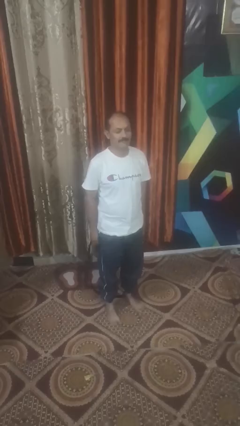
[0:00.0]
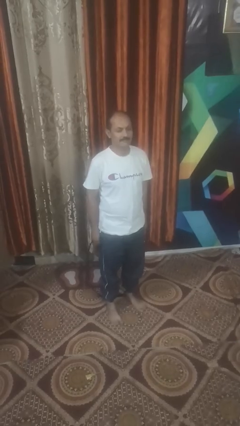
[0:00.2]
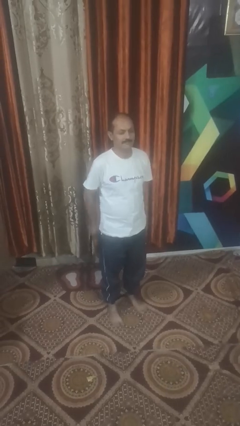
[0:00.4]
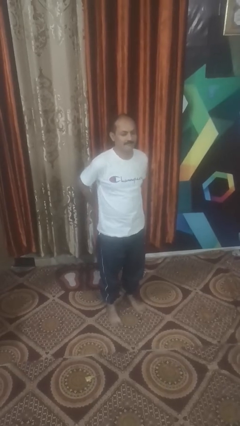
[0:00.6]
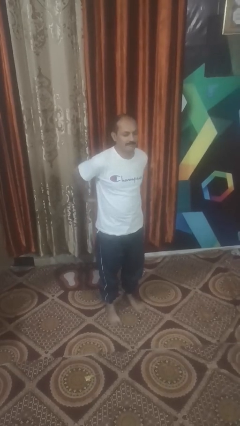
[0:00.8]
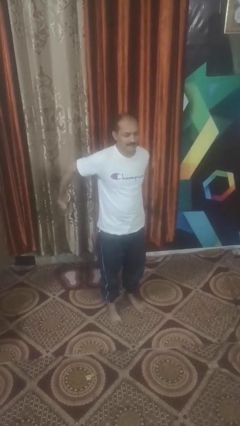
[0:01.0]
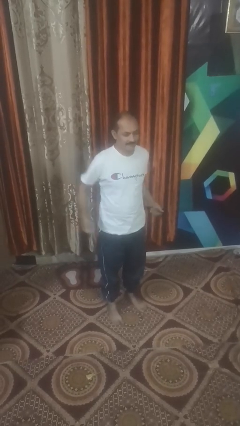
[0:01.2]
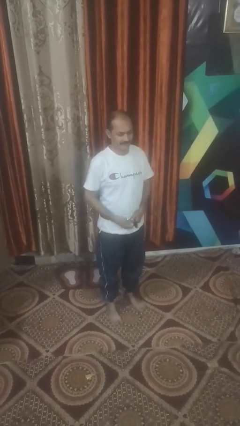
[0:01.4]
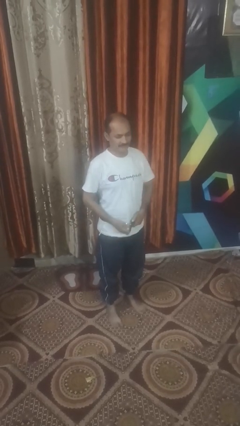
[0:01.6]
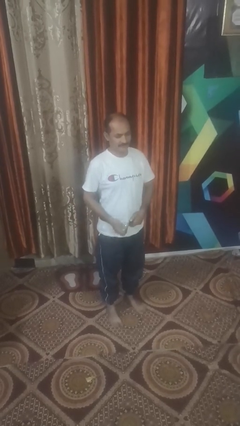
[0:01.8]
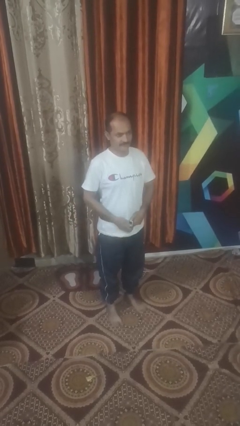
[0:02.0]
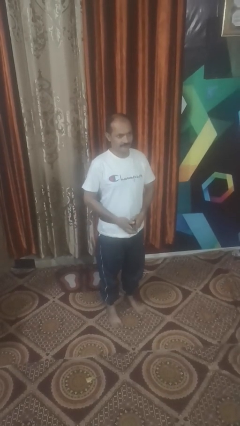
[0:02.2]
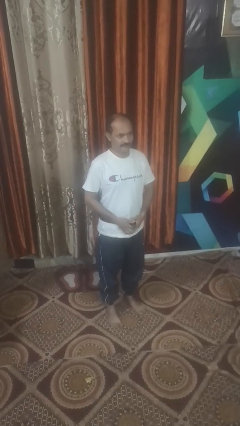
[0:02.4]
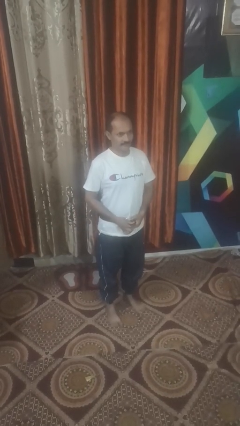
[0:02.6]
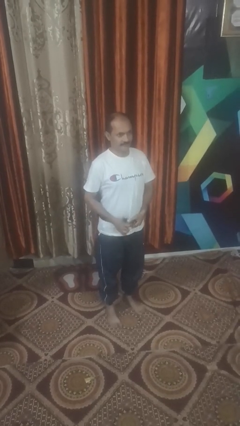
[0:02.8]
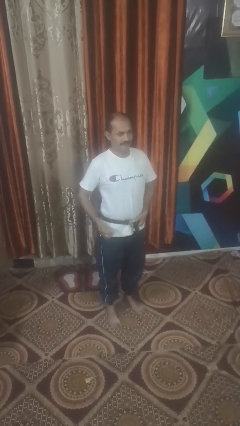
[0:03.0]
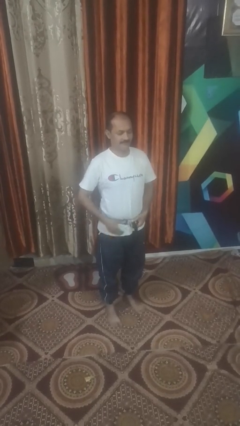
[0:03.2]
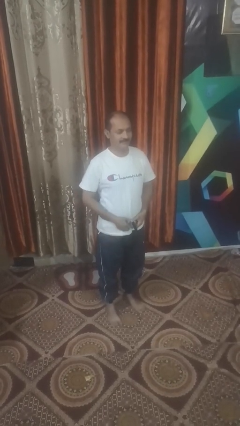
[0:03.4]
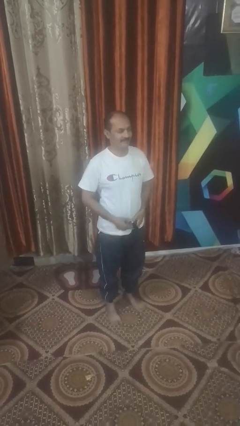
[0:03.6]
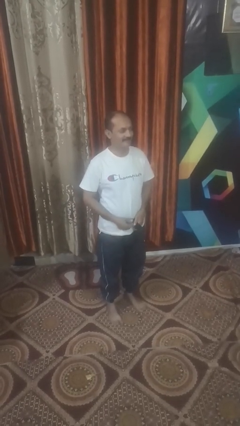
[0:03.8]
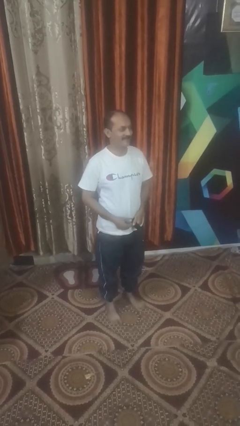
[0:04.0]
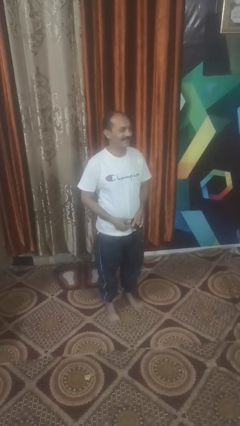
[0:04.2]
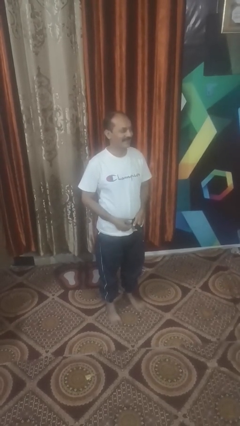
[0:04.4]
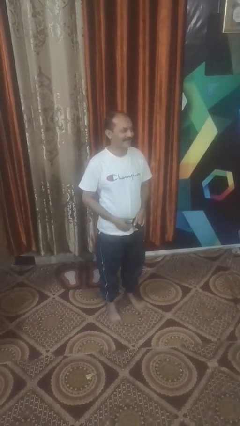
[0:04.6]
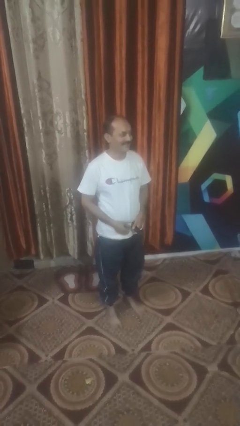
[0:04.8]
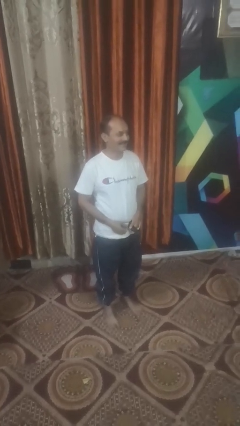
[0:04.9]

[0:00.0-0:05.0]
person puts on belt

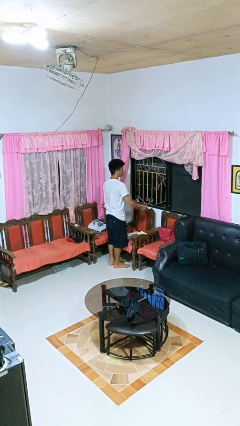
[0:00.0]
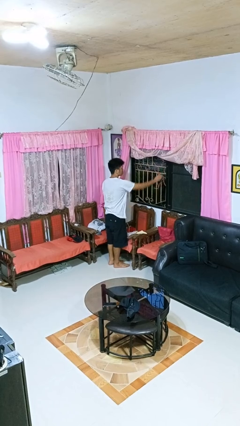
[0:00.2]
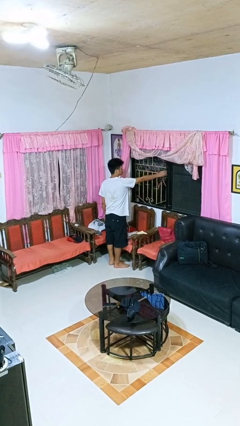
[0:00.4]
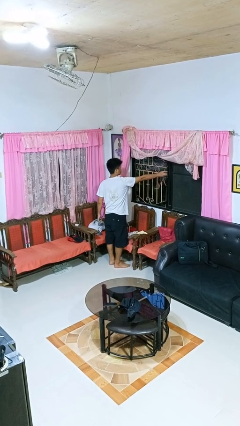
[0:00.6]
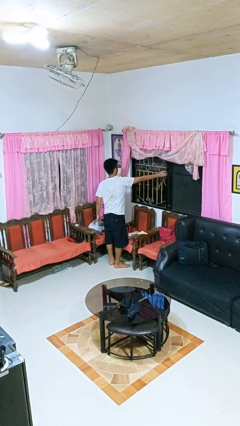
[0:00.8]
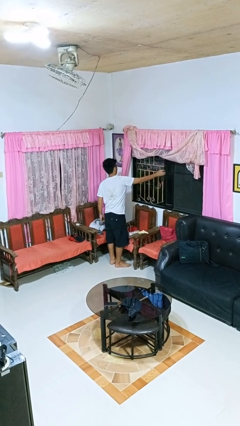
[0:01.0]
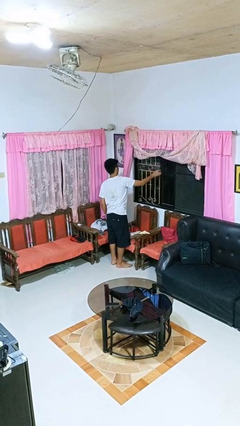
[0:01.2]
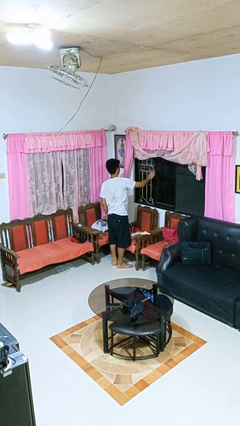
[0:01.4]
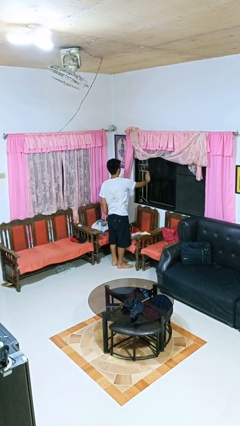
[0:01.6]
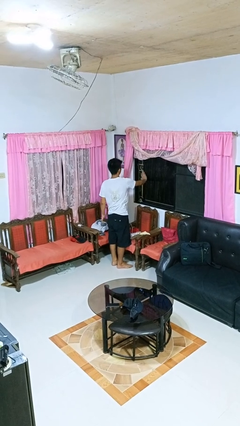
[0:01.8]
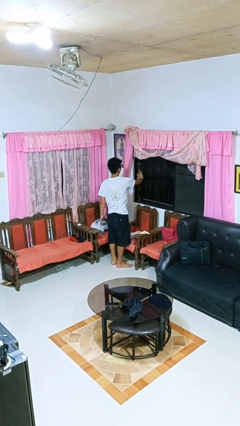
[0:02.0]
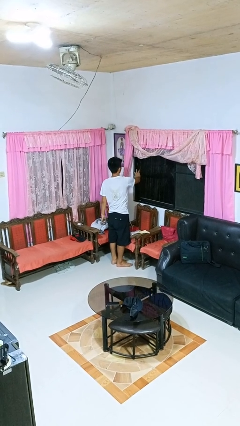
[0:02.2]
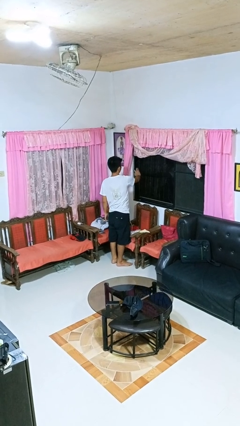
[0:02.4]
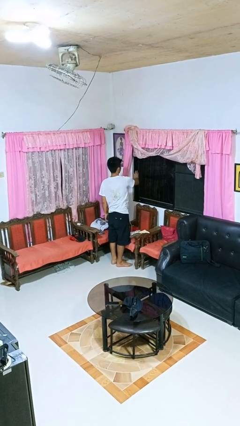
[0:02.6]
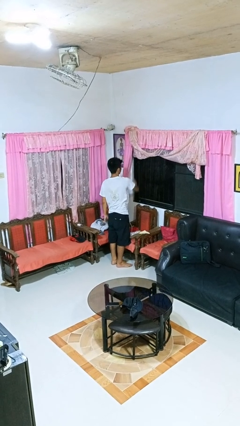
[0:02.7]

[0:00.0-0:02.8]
person closes home window

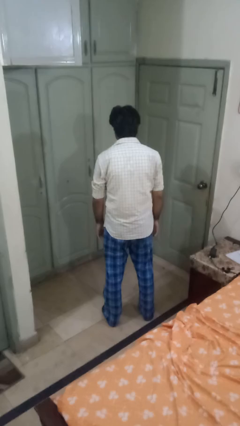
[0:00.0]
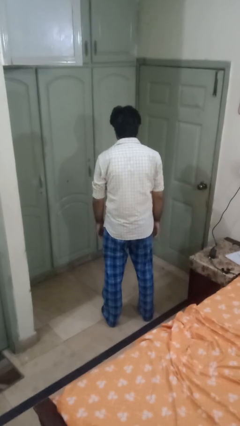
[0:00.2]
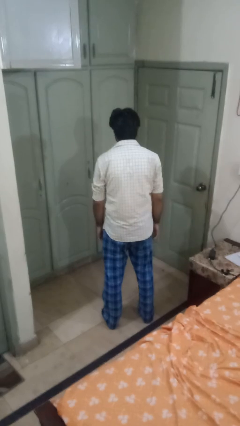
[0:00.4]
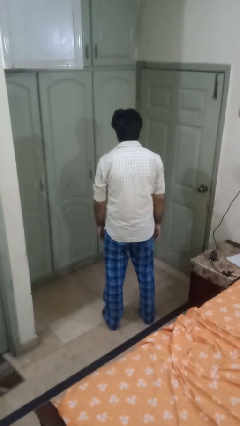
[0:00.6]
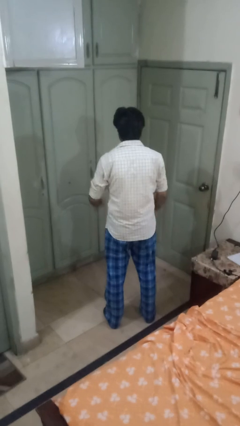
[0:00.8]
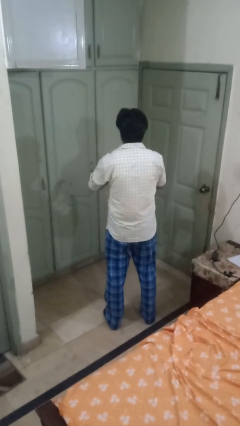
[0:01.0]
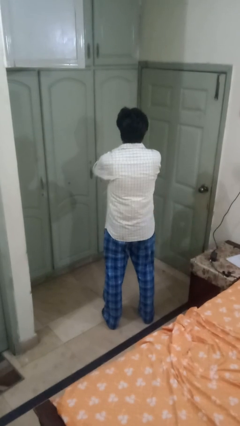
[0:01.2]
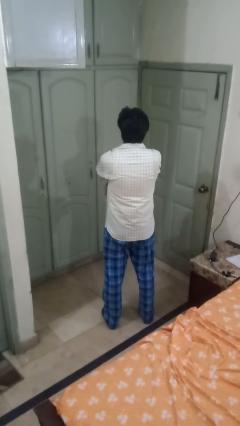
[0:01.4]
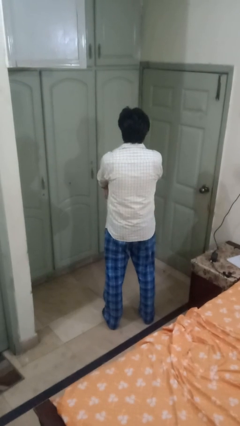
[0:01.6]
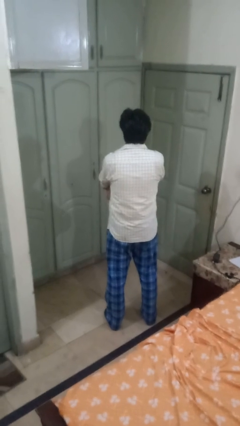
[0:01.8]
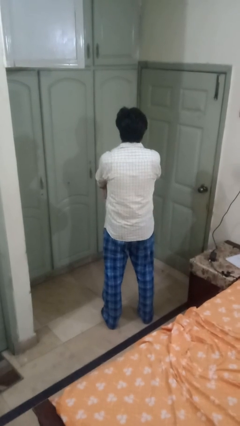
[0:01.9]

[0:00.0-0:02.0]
person crosses arms

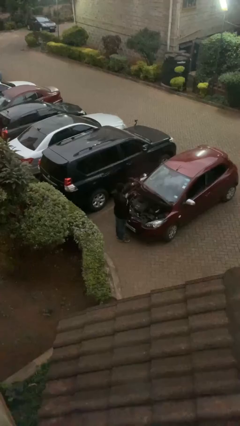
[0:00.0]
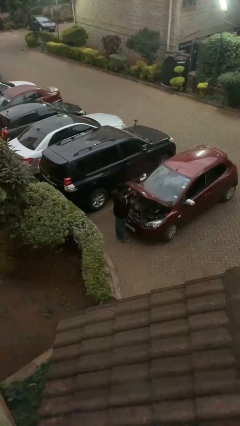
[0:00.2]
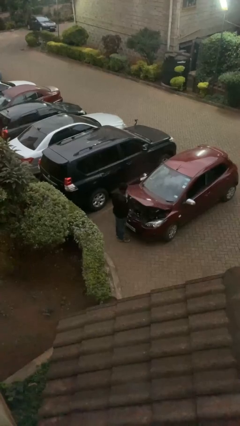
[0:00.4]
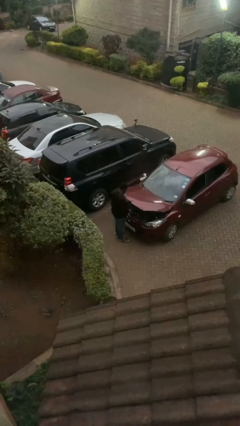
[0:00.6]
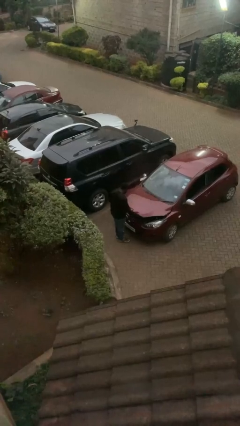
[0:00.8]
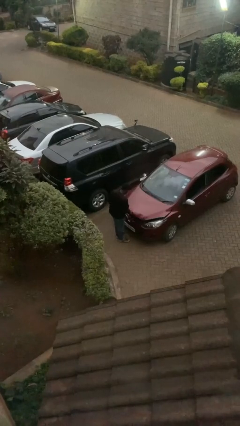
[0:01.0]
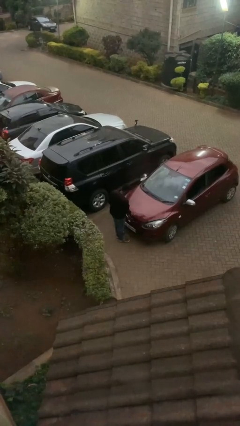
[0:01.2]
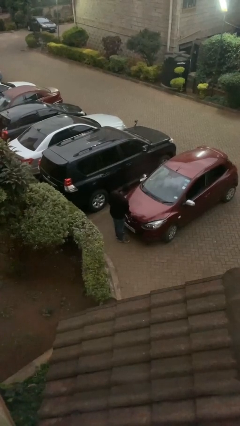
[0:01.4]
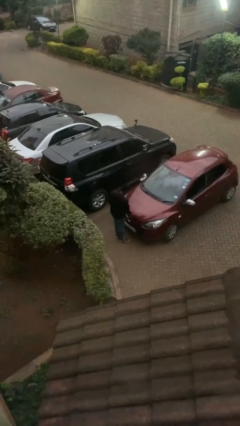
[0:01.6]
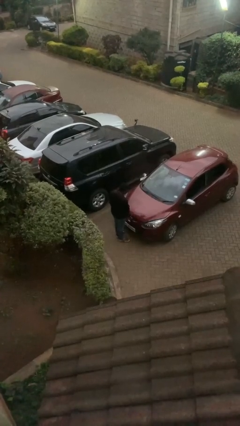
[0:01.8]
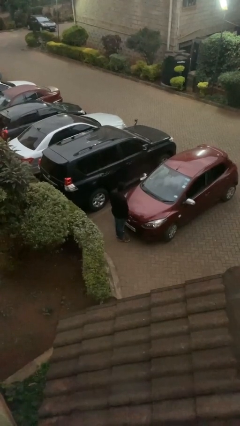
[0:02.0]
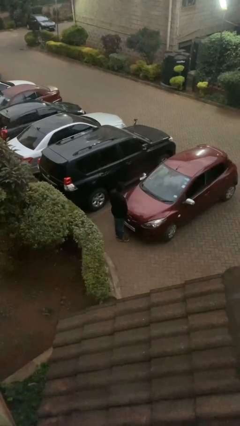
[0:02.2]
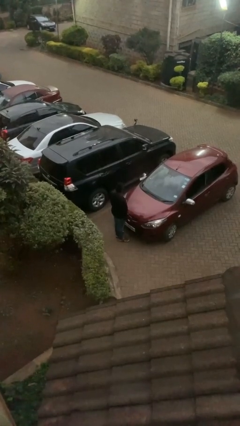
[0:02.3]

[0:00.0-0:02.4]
person closes car hood

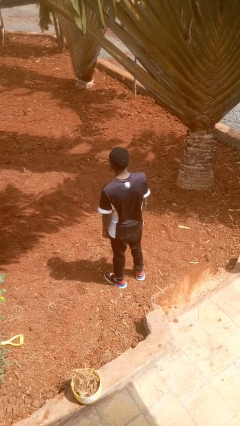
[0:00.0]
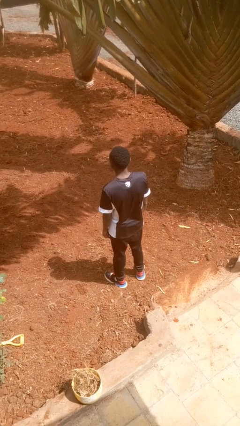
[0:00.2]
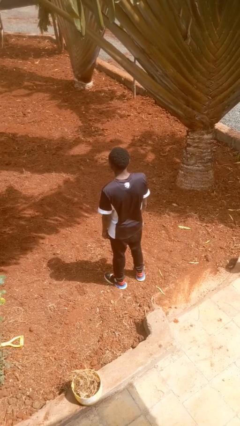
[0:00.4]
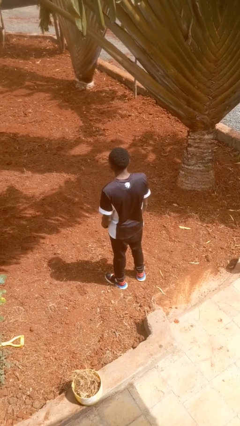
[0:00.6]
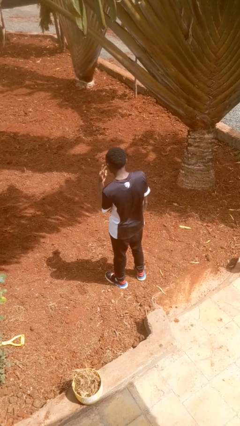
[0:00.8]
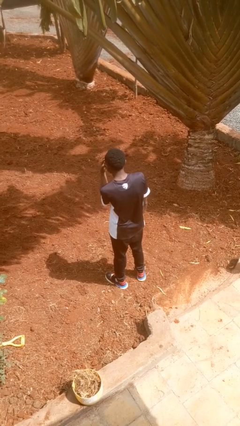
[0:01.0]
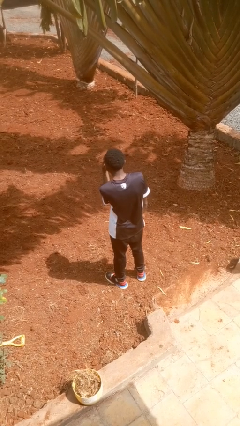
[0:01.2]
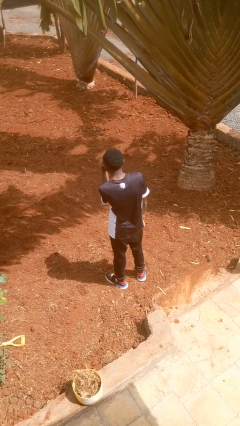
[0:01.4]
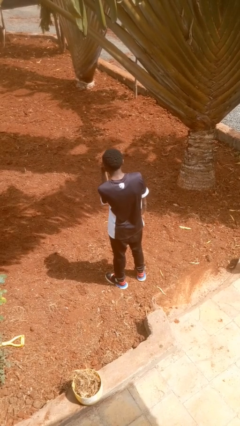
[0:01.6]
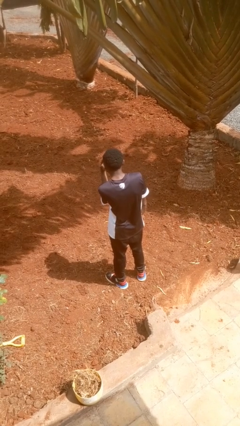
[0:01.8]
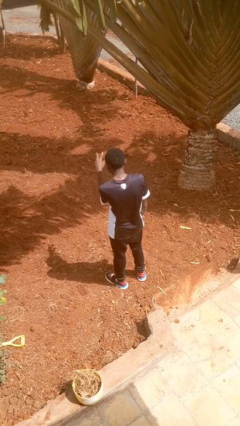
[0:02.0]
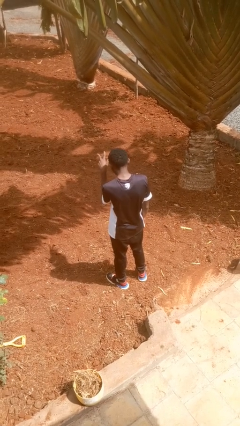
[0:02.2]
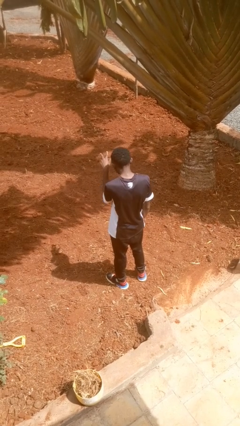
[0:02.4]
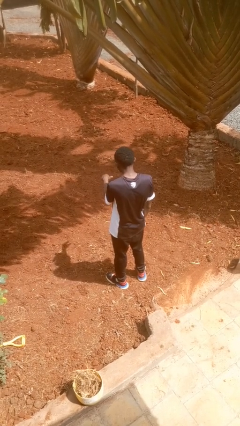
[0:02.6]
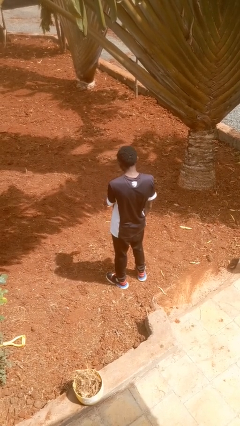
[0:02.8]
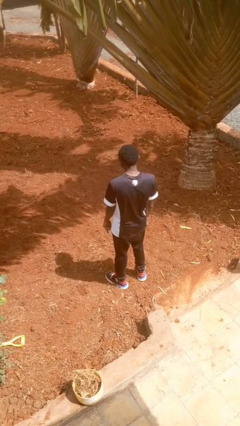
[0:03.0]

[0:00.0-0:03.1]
person gestures watch closely

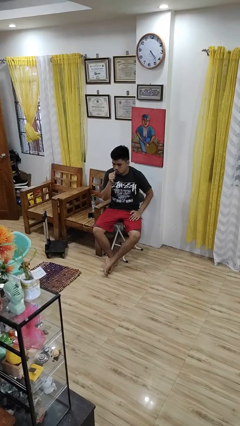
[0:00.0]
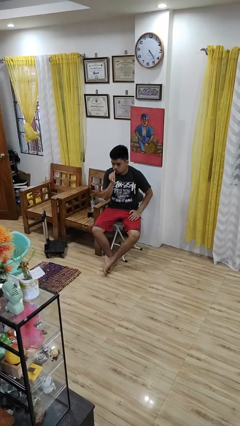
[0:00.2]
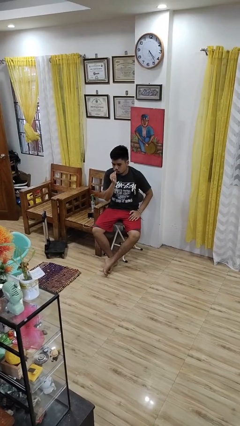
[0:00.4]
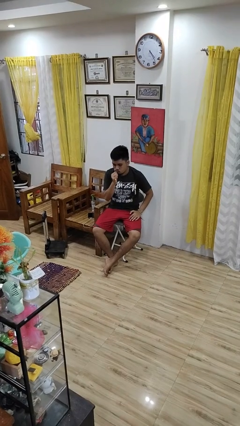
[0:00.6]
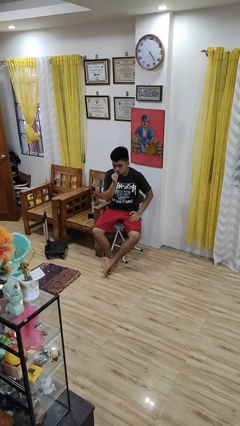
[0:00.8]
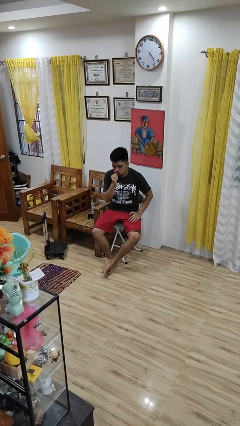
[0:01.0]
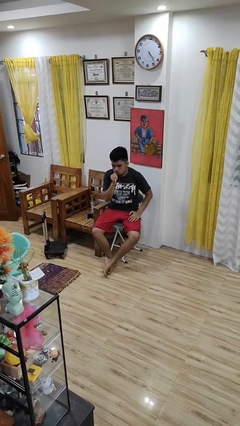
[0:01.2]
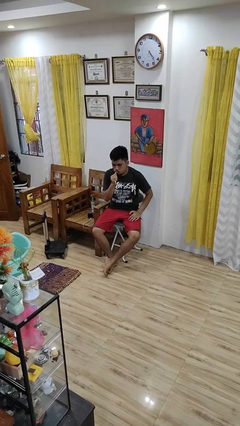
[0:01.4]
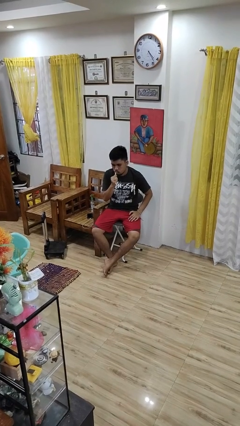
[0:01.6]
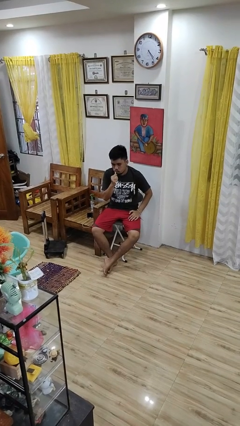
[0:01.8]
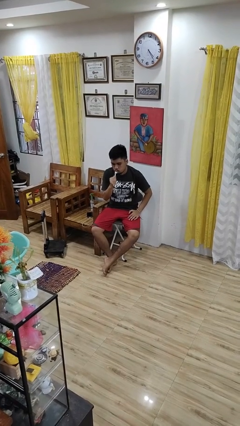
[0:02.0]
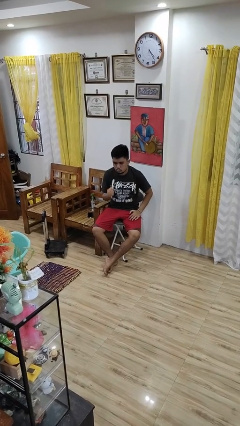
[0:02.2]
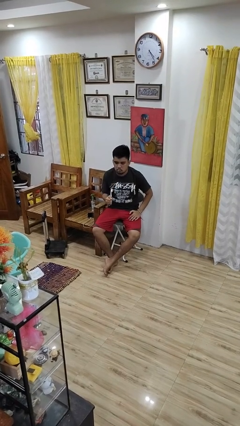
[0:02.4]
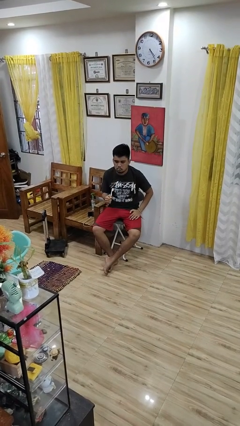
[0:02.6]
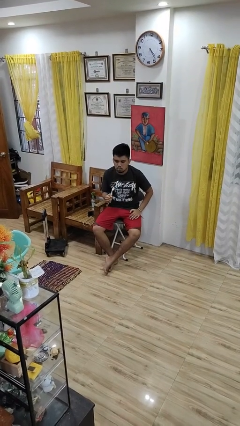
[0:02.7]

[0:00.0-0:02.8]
person brushes teeth
